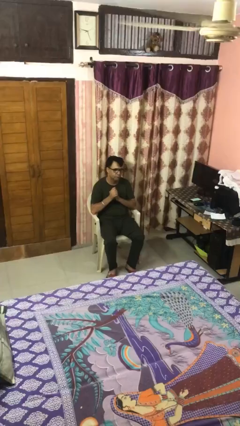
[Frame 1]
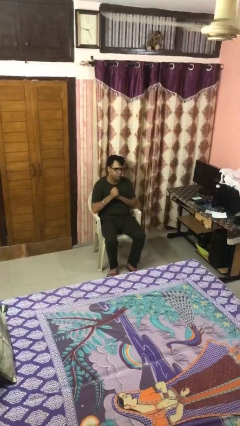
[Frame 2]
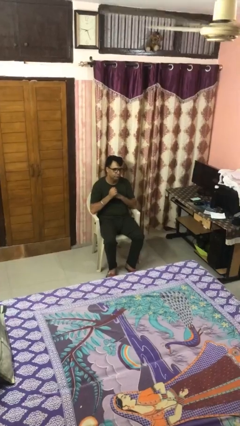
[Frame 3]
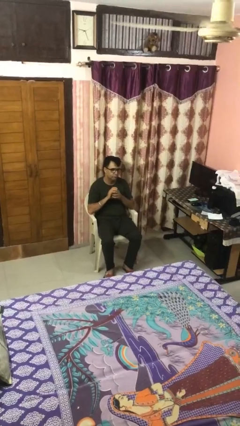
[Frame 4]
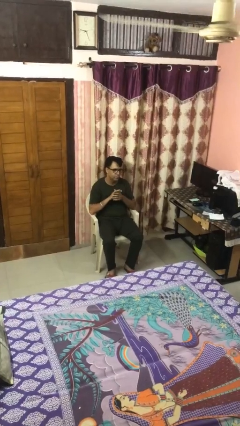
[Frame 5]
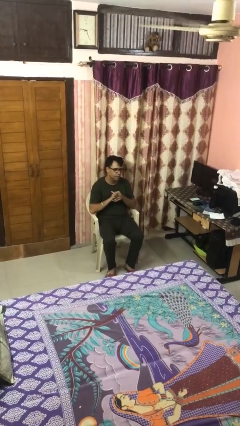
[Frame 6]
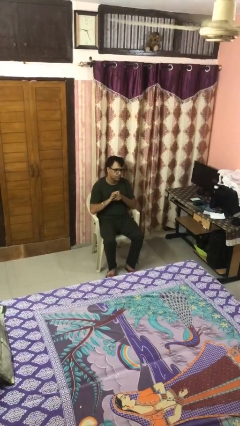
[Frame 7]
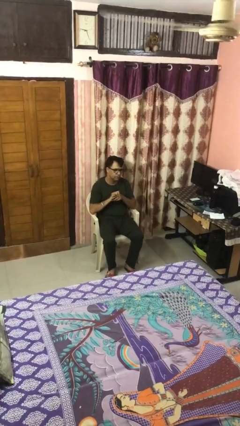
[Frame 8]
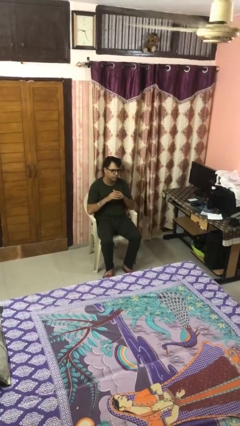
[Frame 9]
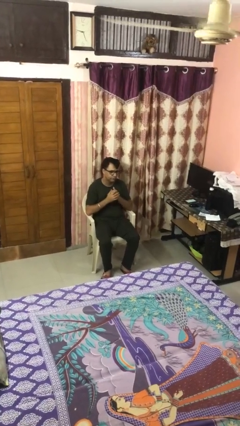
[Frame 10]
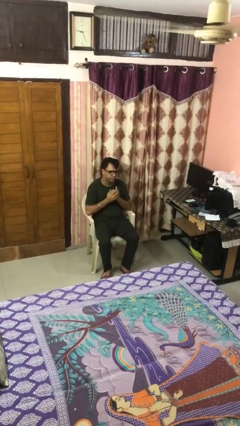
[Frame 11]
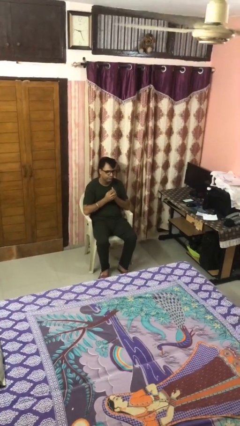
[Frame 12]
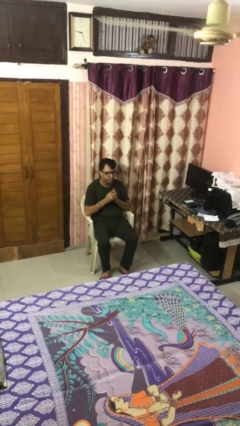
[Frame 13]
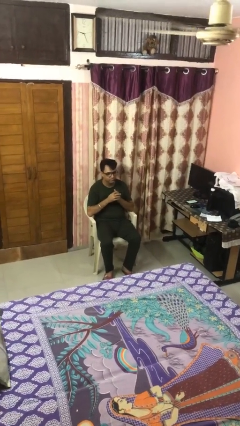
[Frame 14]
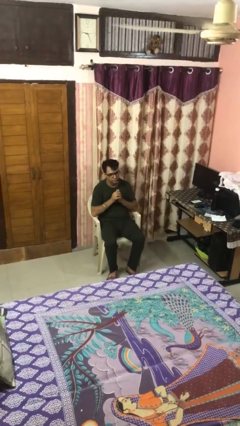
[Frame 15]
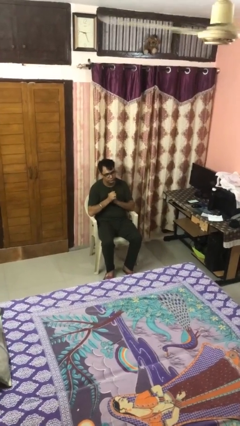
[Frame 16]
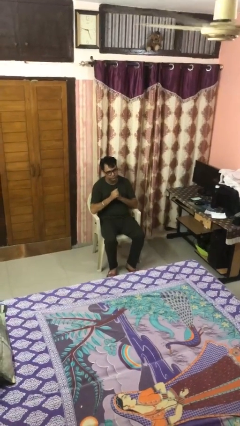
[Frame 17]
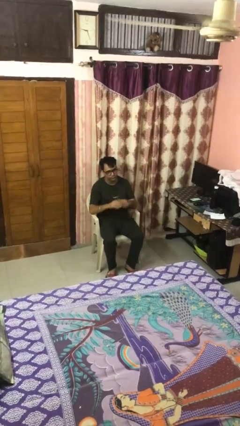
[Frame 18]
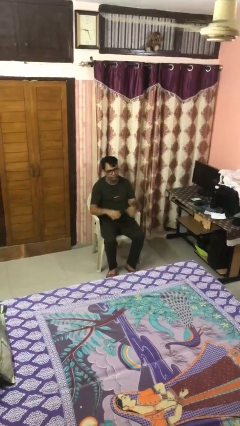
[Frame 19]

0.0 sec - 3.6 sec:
person cracks knuckles

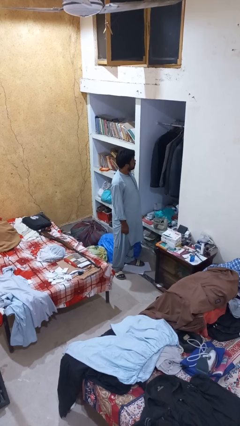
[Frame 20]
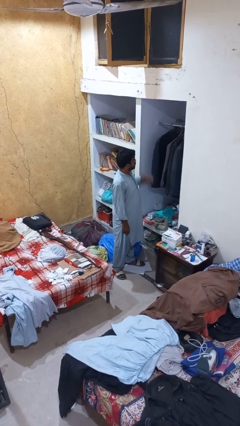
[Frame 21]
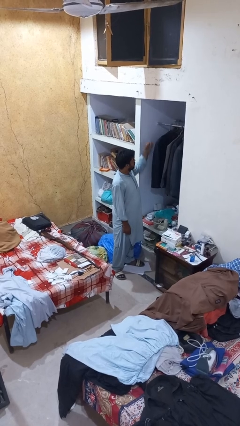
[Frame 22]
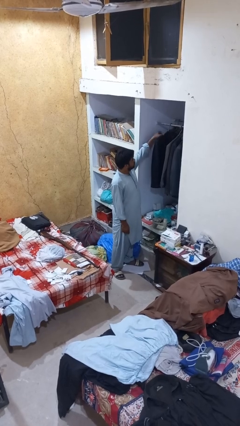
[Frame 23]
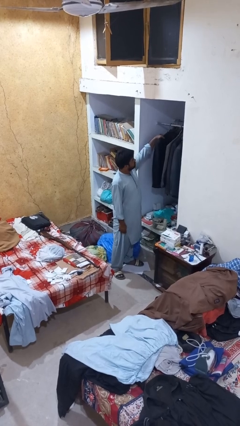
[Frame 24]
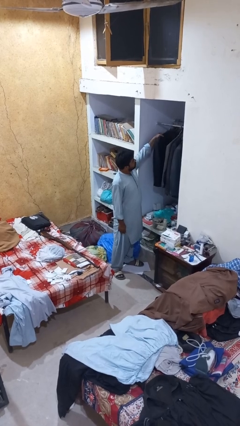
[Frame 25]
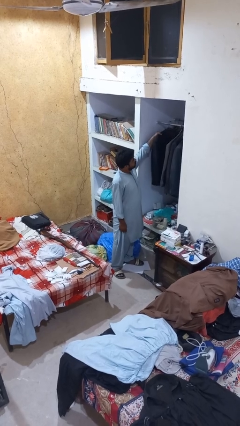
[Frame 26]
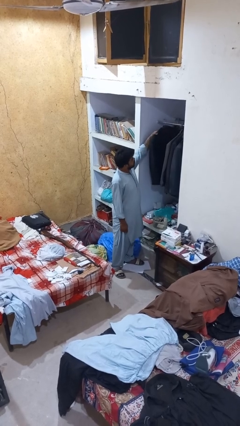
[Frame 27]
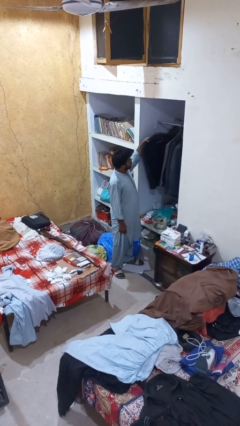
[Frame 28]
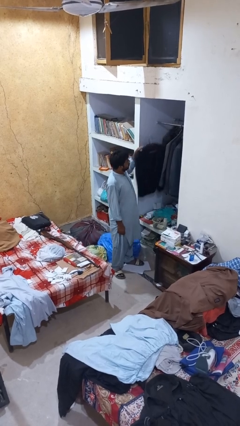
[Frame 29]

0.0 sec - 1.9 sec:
person takes clothes from closet

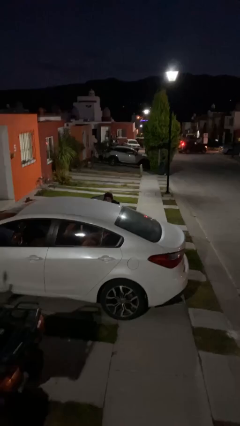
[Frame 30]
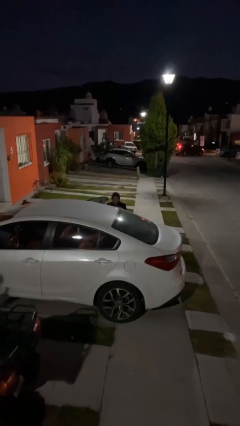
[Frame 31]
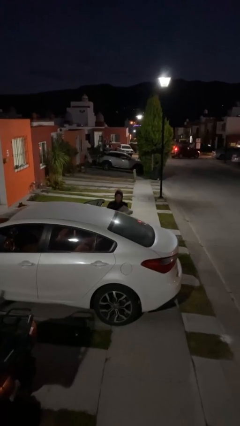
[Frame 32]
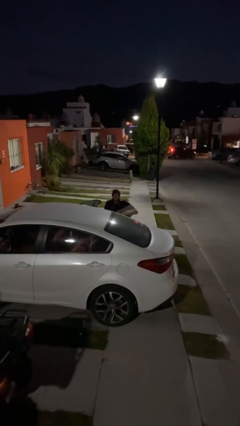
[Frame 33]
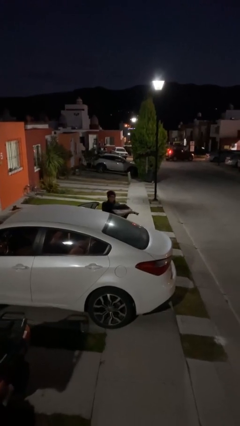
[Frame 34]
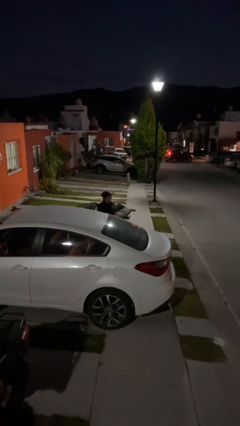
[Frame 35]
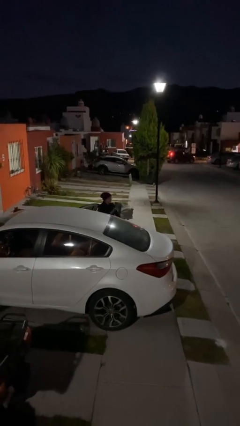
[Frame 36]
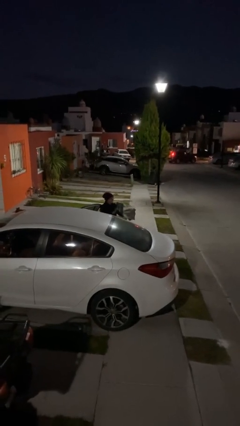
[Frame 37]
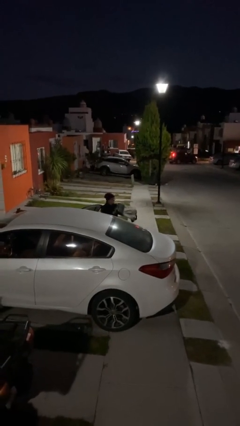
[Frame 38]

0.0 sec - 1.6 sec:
person unloads car

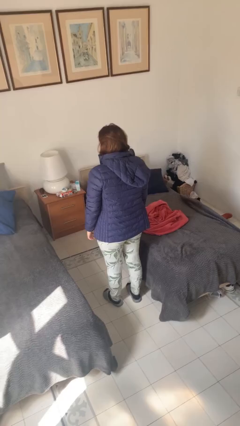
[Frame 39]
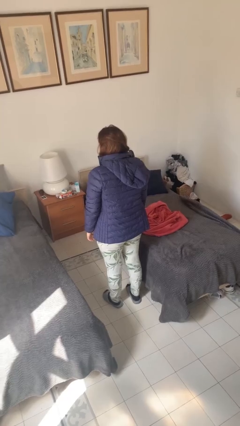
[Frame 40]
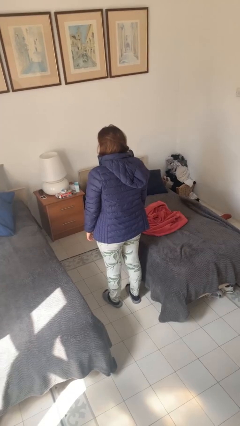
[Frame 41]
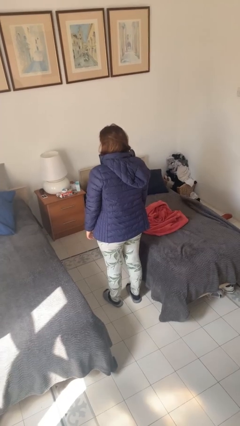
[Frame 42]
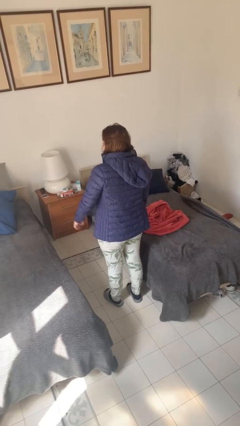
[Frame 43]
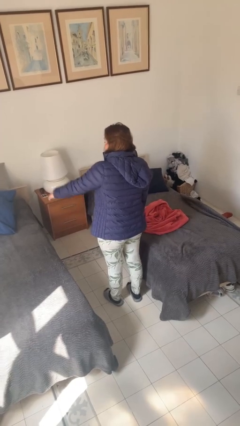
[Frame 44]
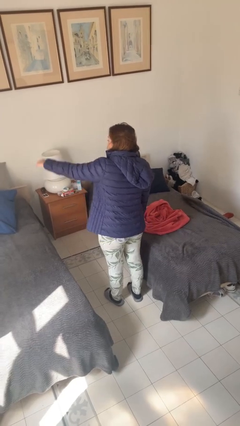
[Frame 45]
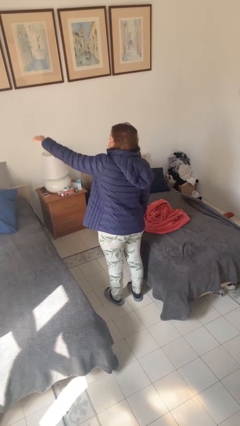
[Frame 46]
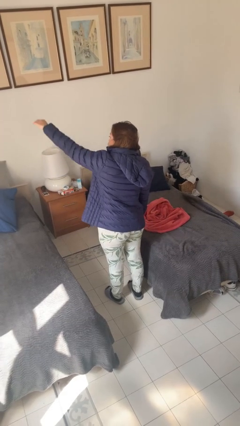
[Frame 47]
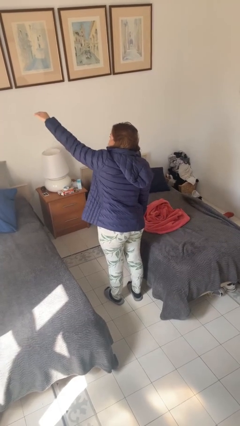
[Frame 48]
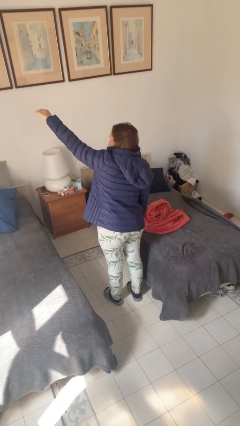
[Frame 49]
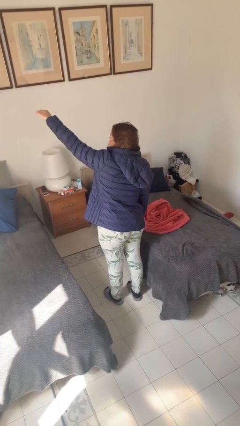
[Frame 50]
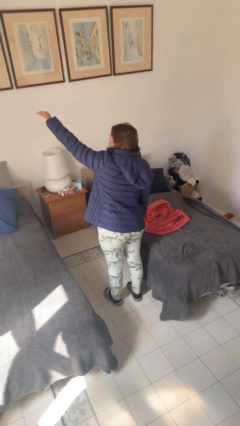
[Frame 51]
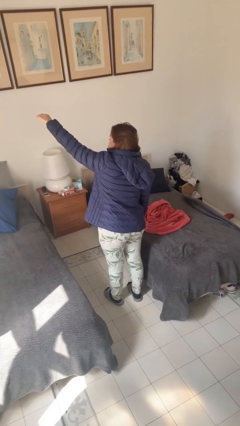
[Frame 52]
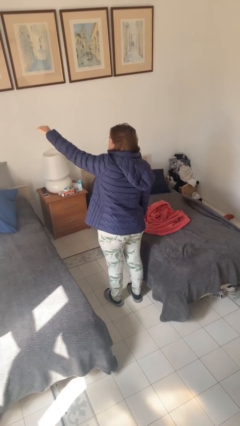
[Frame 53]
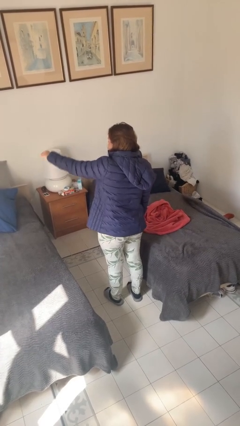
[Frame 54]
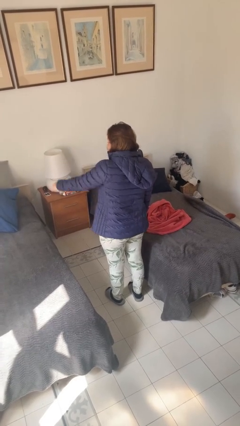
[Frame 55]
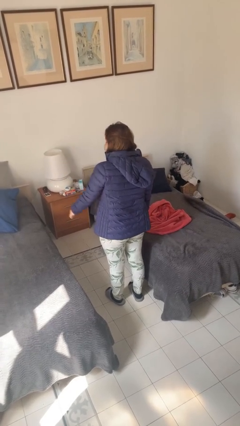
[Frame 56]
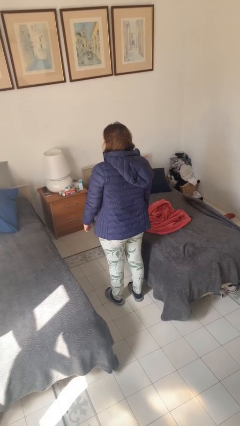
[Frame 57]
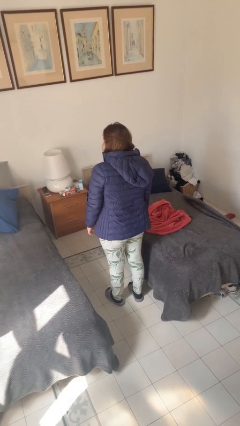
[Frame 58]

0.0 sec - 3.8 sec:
person gestures hang loose

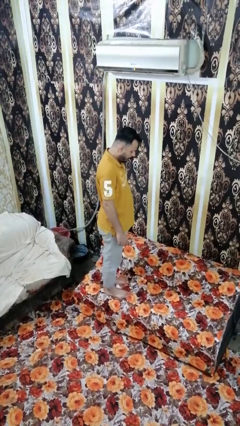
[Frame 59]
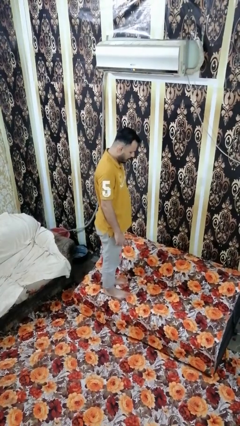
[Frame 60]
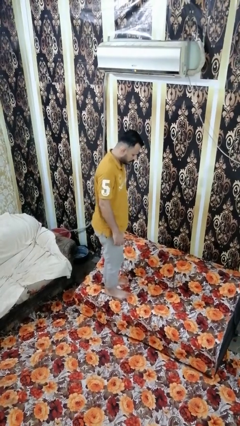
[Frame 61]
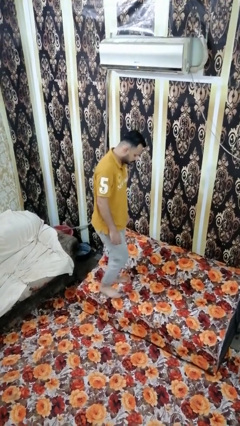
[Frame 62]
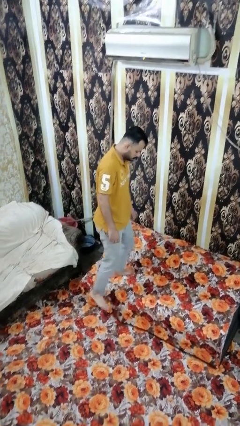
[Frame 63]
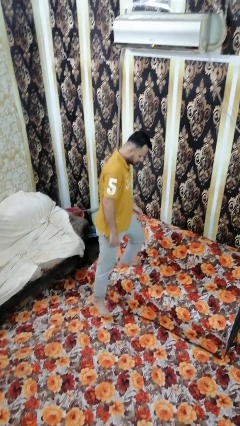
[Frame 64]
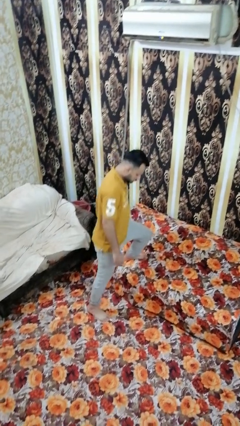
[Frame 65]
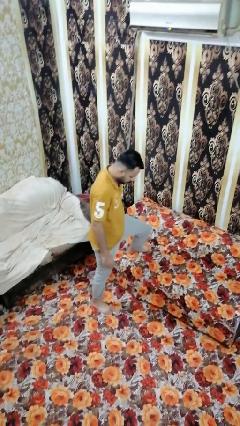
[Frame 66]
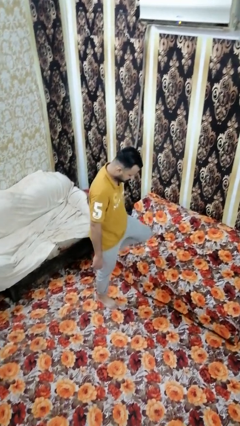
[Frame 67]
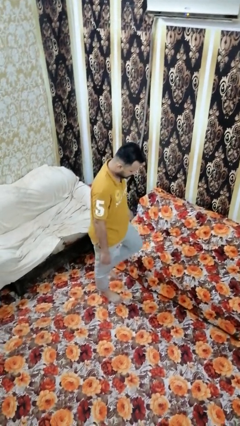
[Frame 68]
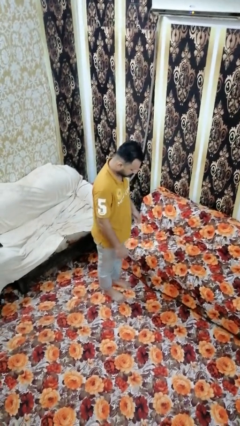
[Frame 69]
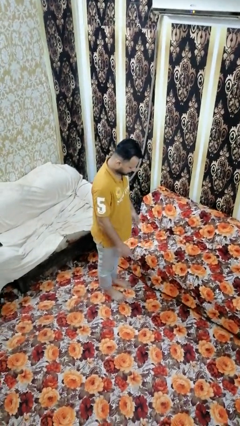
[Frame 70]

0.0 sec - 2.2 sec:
person climbs off couch

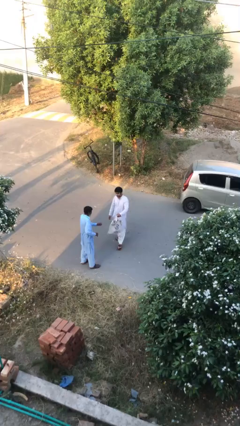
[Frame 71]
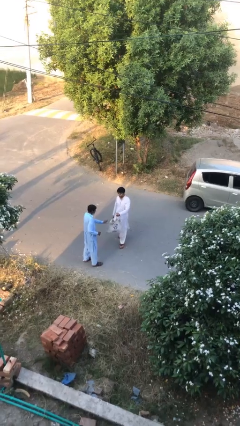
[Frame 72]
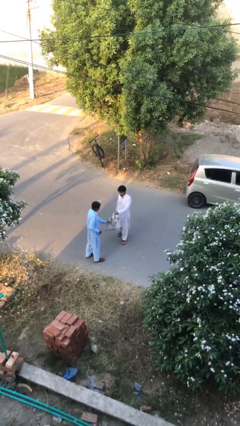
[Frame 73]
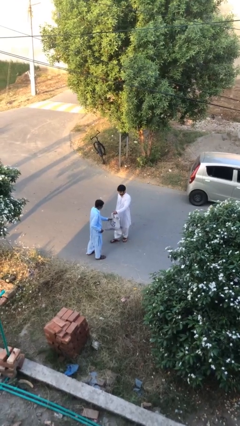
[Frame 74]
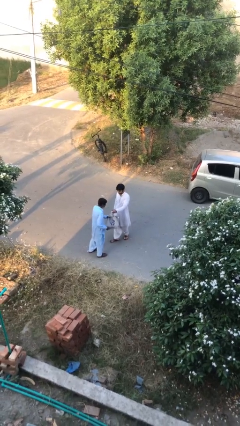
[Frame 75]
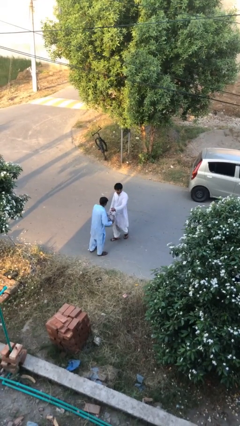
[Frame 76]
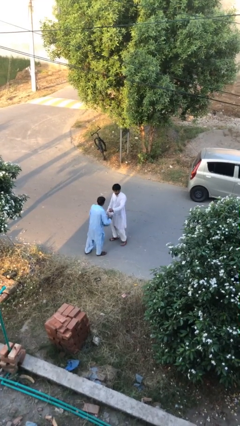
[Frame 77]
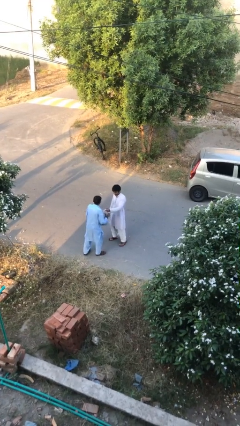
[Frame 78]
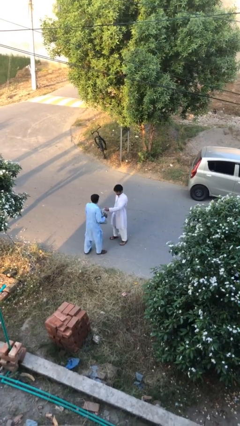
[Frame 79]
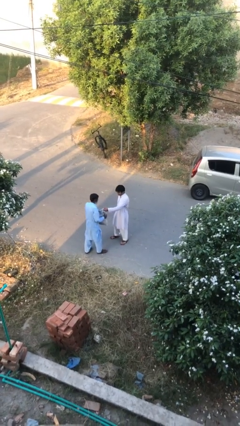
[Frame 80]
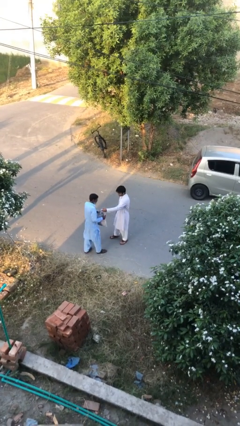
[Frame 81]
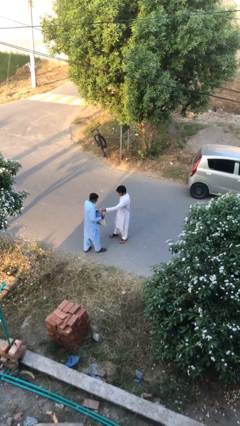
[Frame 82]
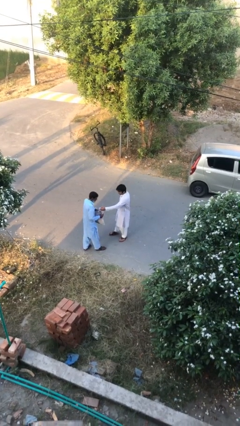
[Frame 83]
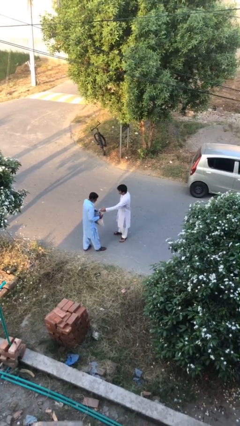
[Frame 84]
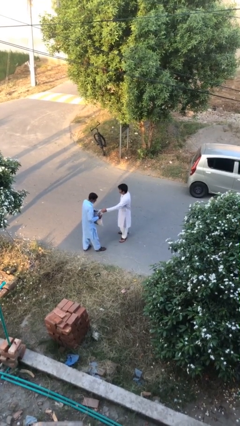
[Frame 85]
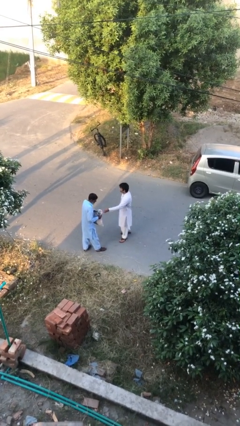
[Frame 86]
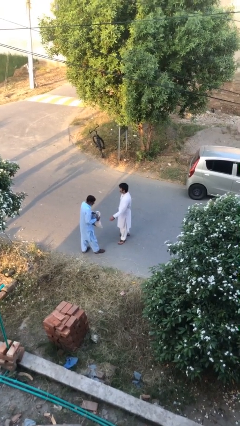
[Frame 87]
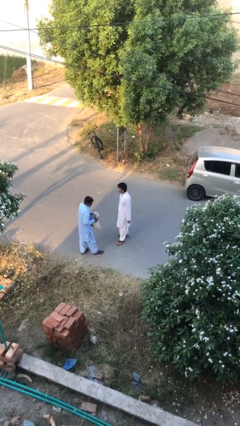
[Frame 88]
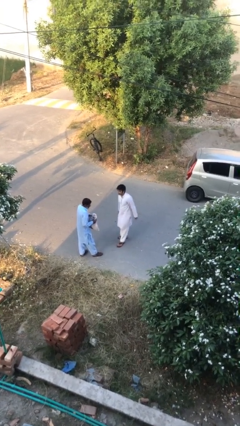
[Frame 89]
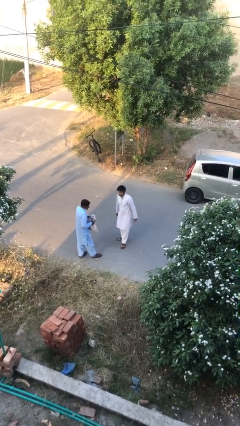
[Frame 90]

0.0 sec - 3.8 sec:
person transfers object to person
